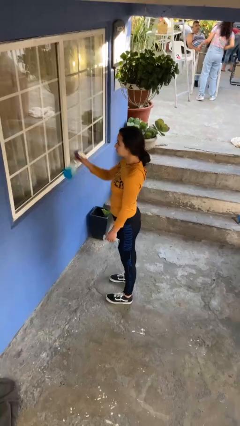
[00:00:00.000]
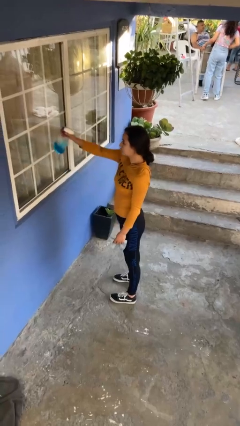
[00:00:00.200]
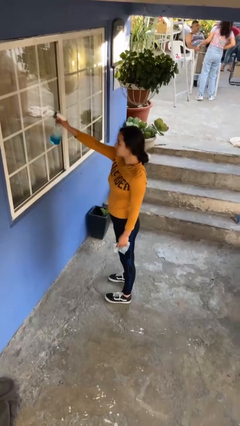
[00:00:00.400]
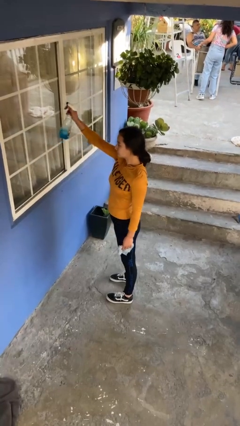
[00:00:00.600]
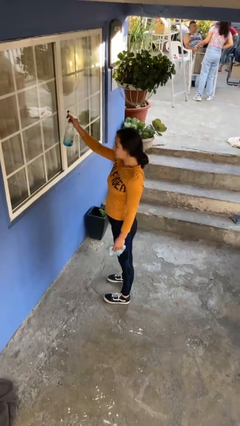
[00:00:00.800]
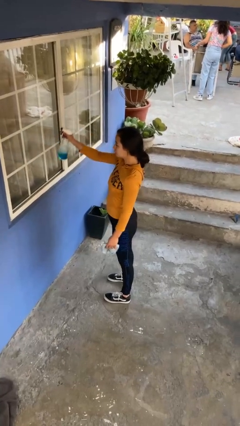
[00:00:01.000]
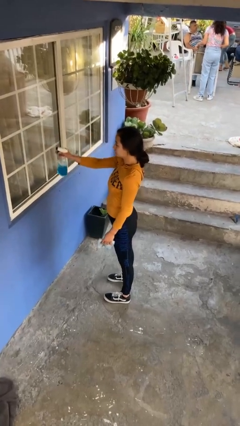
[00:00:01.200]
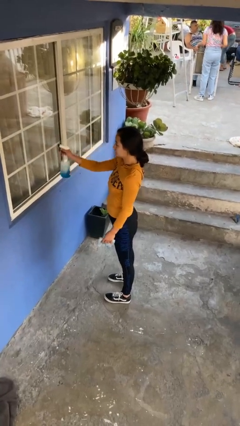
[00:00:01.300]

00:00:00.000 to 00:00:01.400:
person sprays from bottle

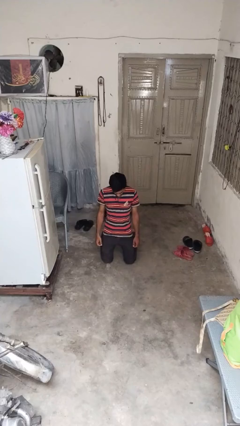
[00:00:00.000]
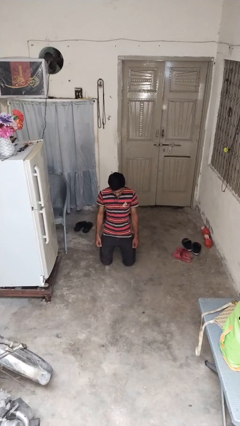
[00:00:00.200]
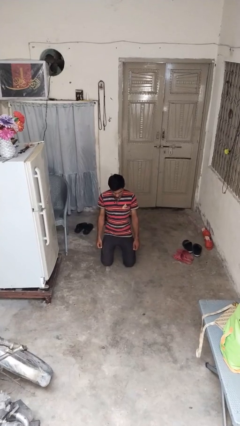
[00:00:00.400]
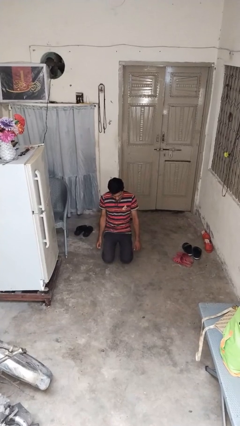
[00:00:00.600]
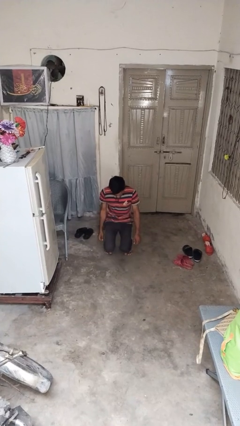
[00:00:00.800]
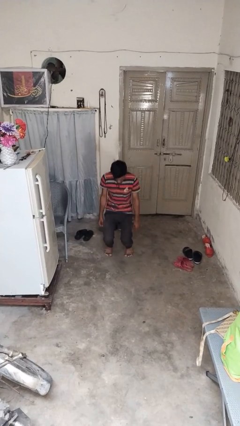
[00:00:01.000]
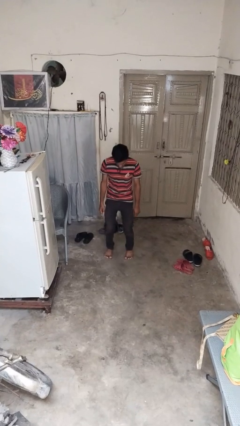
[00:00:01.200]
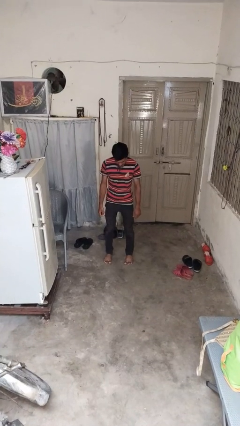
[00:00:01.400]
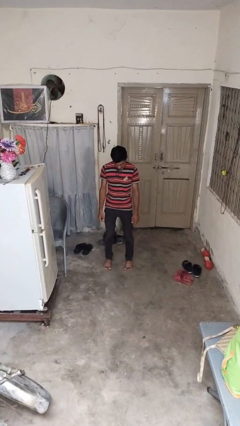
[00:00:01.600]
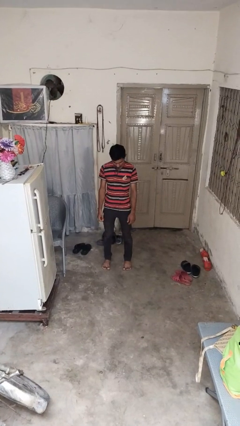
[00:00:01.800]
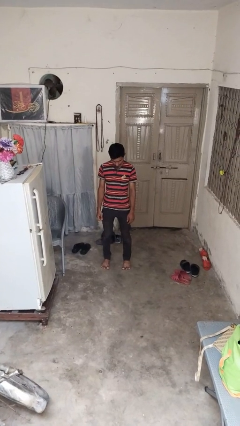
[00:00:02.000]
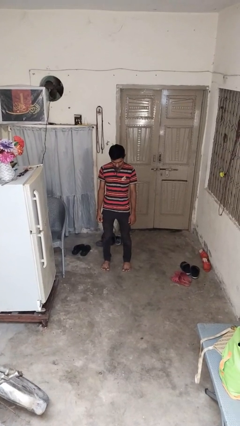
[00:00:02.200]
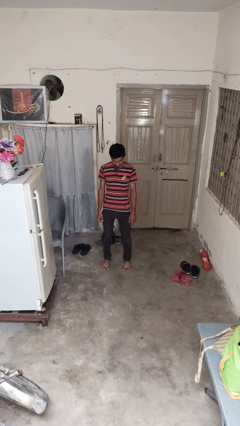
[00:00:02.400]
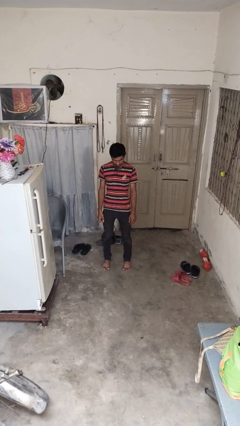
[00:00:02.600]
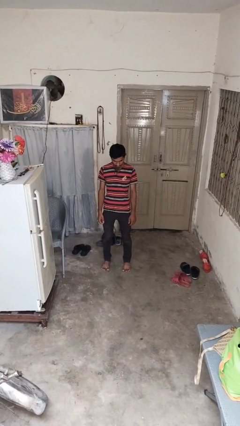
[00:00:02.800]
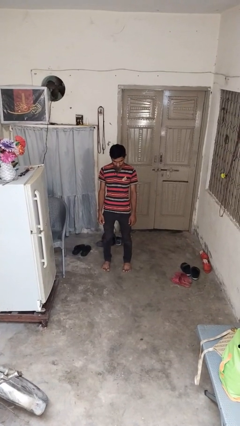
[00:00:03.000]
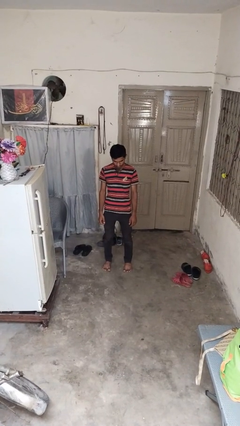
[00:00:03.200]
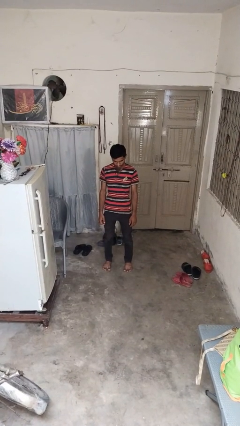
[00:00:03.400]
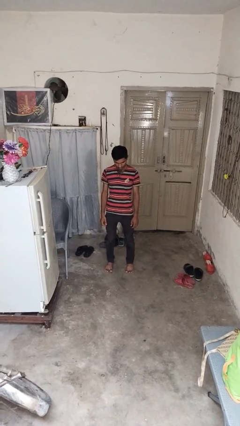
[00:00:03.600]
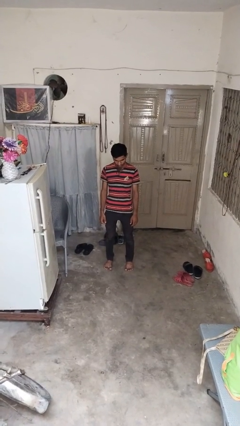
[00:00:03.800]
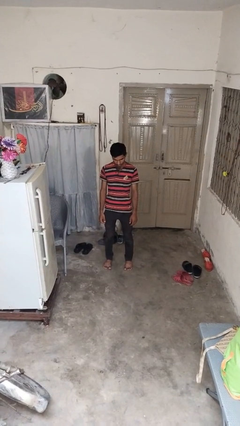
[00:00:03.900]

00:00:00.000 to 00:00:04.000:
person stands up from floor

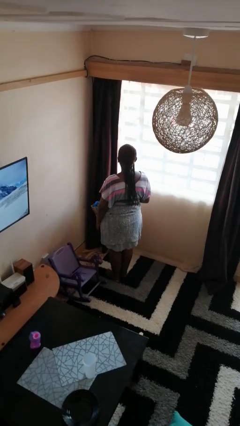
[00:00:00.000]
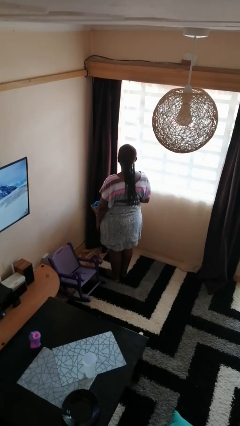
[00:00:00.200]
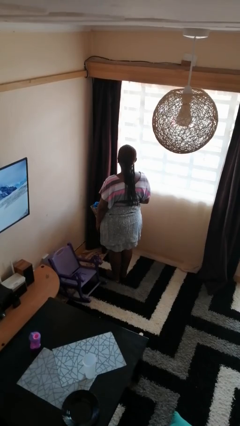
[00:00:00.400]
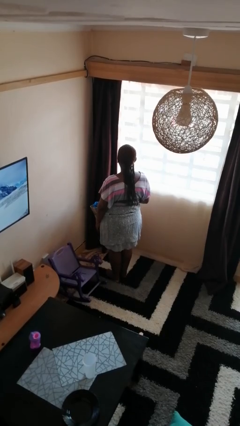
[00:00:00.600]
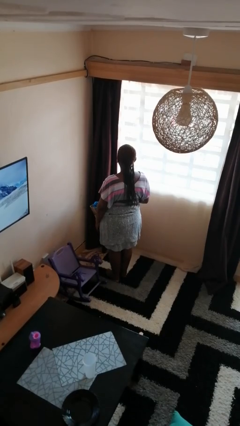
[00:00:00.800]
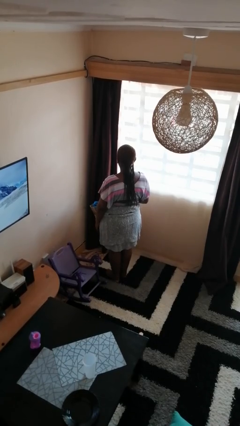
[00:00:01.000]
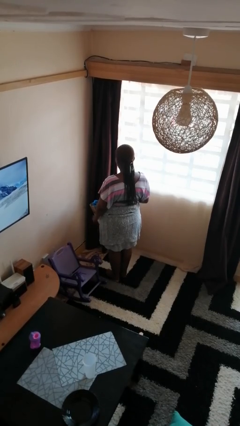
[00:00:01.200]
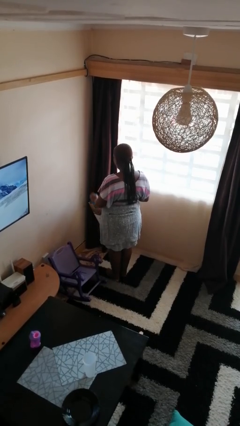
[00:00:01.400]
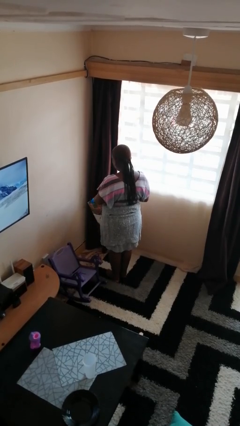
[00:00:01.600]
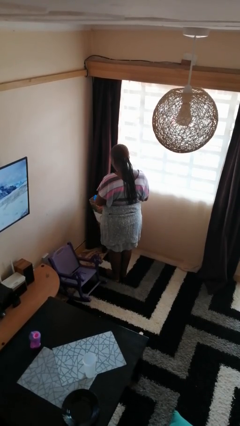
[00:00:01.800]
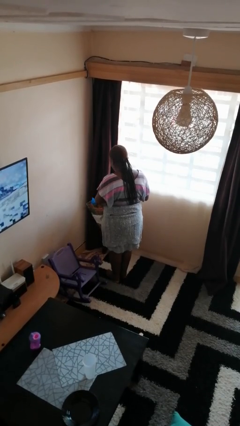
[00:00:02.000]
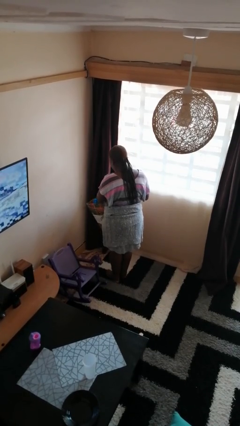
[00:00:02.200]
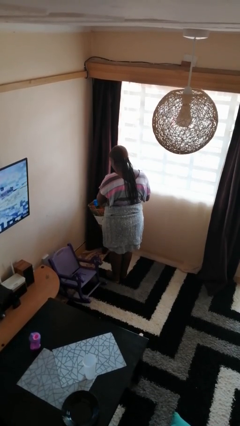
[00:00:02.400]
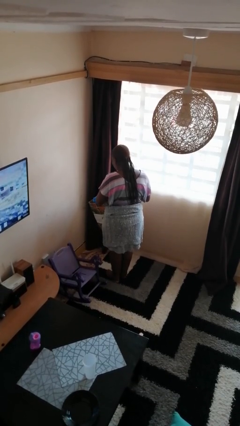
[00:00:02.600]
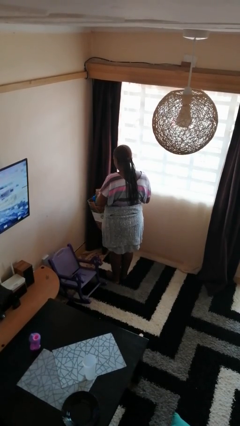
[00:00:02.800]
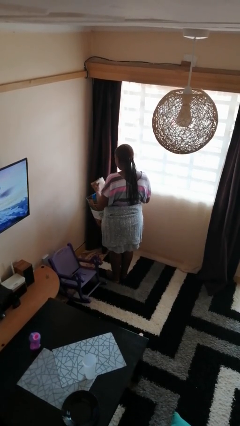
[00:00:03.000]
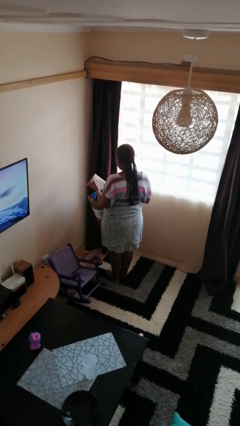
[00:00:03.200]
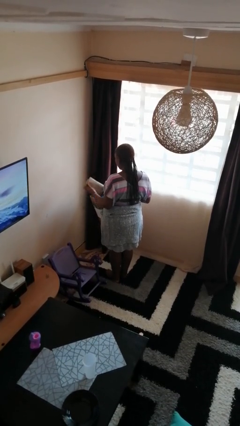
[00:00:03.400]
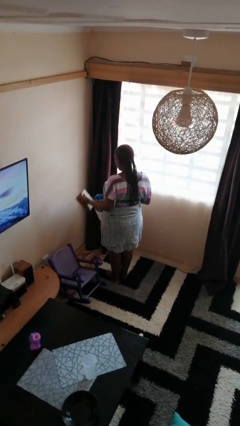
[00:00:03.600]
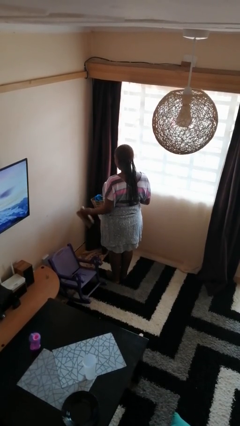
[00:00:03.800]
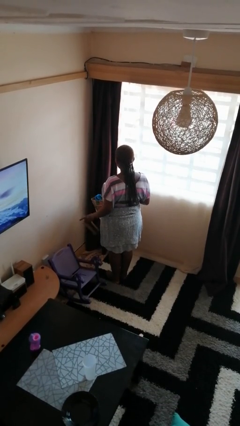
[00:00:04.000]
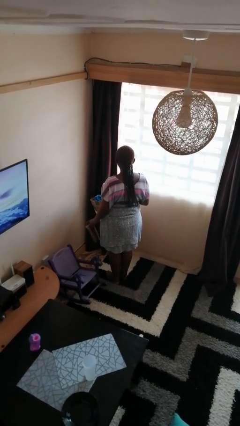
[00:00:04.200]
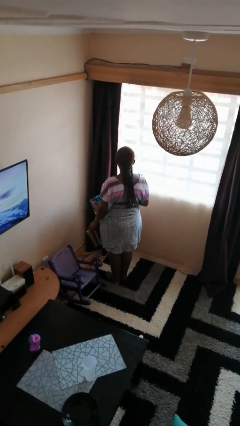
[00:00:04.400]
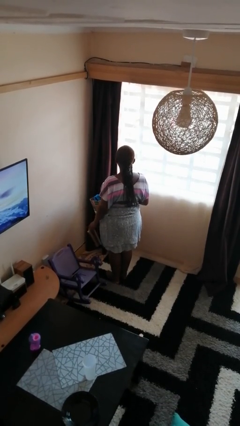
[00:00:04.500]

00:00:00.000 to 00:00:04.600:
person takes object from bag

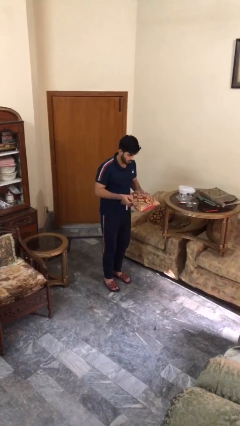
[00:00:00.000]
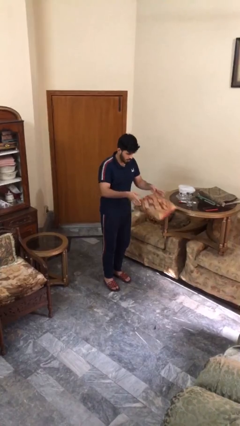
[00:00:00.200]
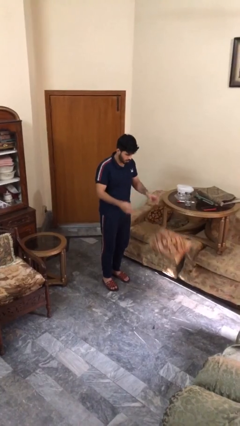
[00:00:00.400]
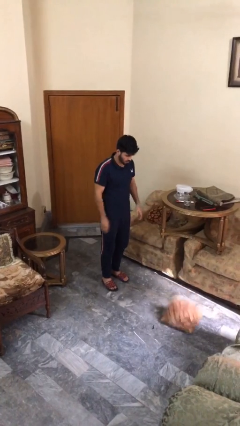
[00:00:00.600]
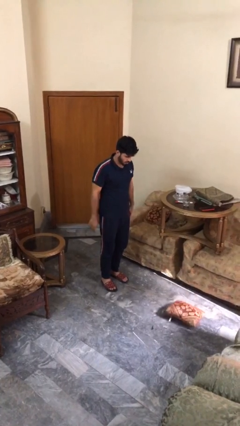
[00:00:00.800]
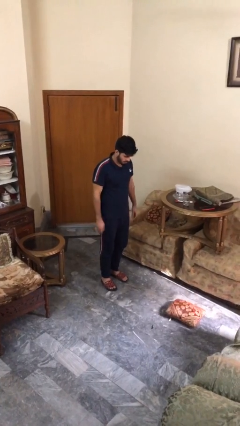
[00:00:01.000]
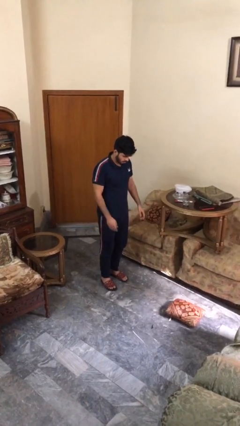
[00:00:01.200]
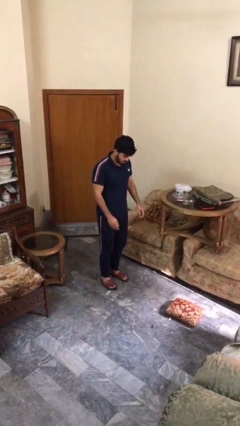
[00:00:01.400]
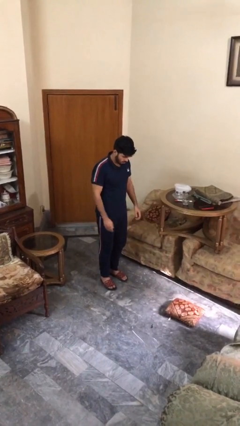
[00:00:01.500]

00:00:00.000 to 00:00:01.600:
person throws object to ground

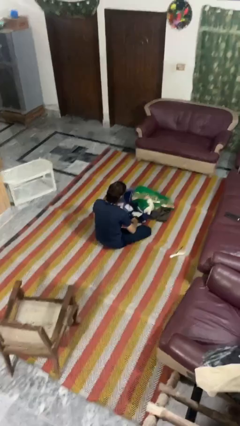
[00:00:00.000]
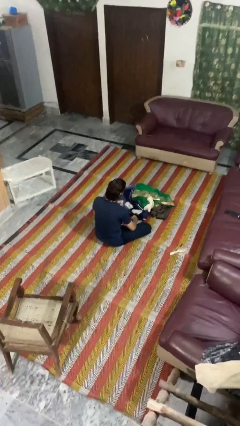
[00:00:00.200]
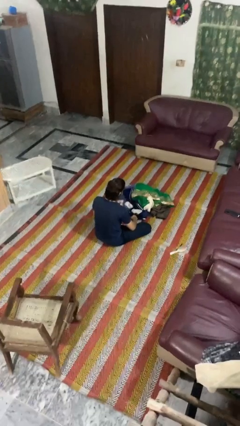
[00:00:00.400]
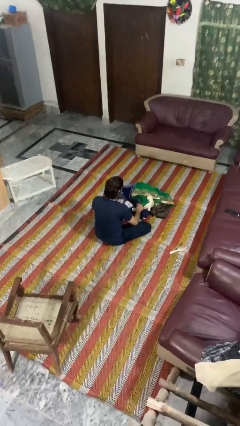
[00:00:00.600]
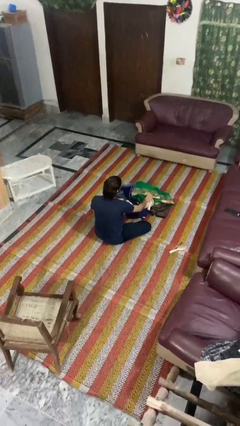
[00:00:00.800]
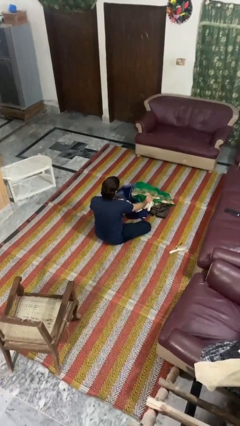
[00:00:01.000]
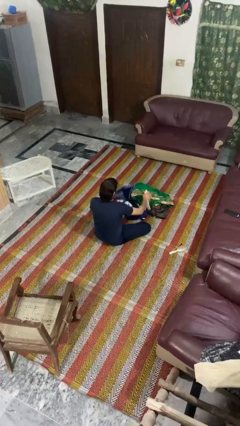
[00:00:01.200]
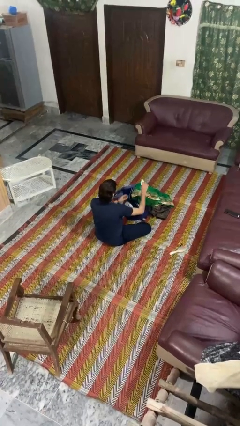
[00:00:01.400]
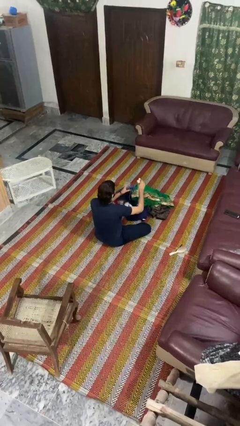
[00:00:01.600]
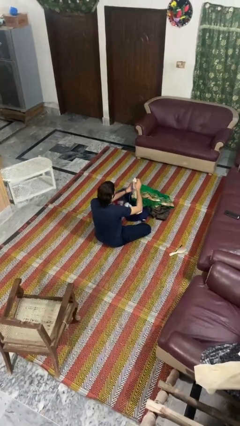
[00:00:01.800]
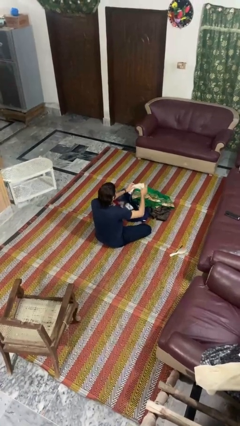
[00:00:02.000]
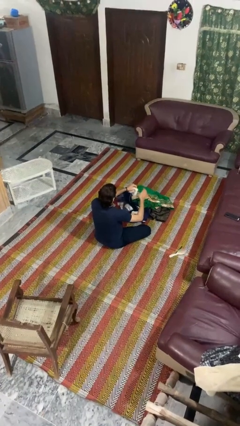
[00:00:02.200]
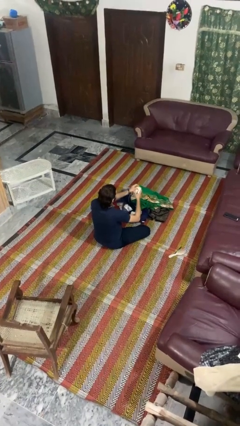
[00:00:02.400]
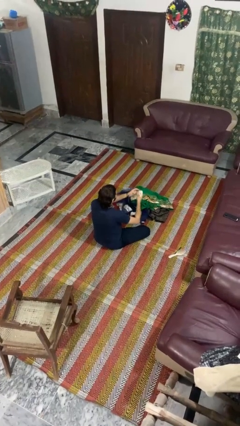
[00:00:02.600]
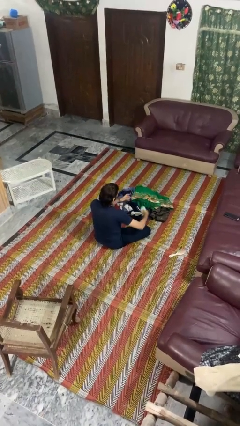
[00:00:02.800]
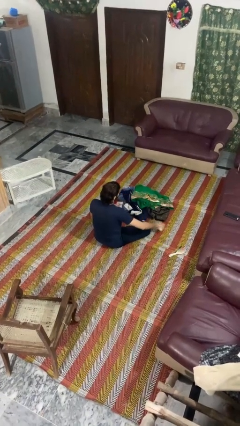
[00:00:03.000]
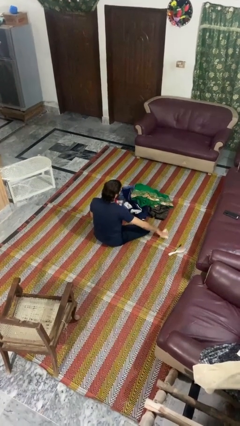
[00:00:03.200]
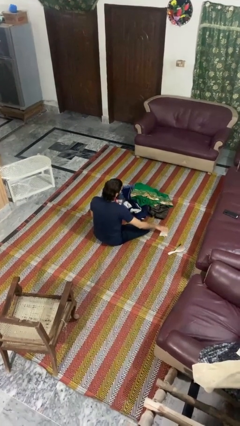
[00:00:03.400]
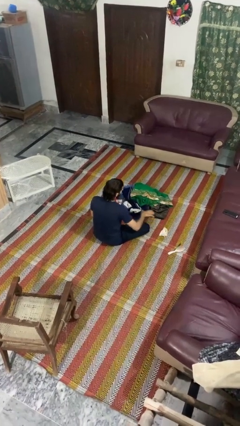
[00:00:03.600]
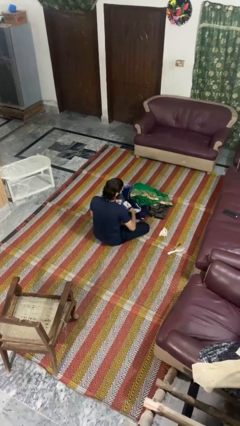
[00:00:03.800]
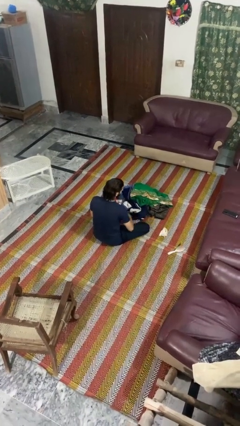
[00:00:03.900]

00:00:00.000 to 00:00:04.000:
person folds socks

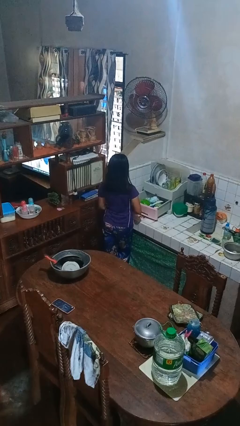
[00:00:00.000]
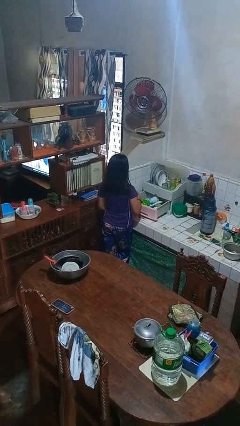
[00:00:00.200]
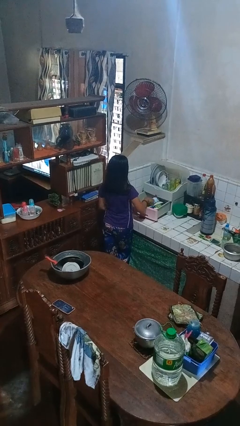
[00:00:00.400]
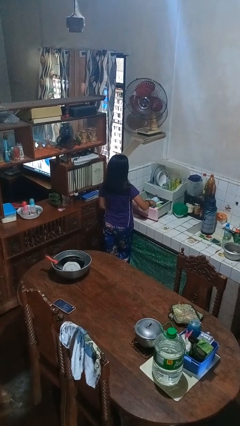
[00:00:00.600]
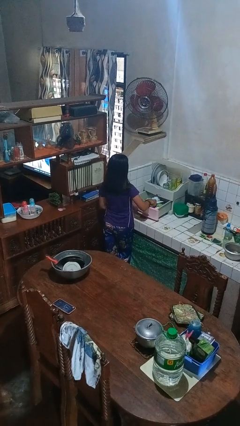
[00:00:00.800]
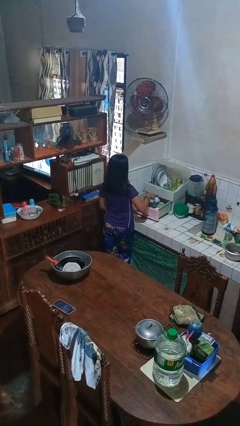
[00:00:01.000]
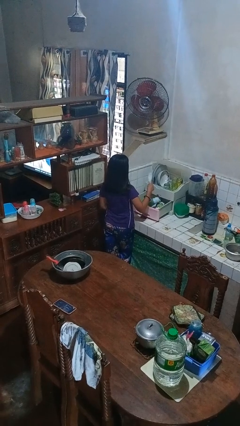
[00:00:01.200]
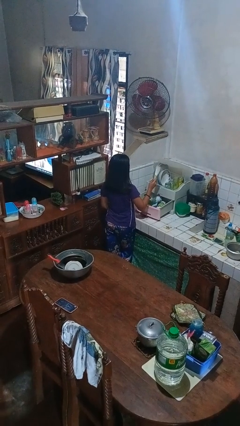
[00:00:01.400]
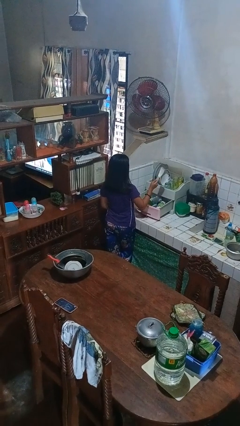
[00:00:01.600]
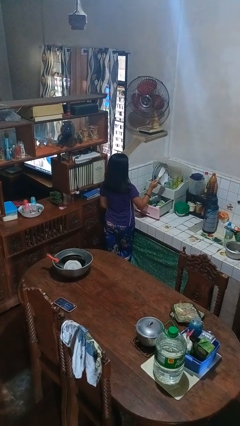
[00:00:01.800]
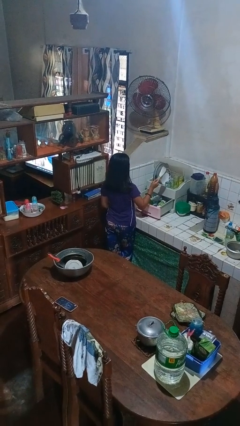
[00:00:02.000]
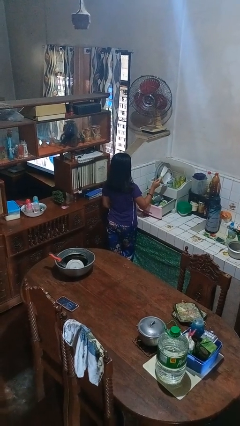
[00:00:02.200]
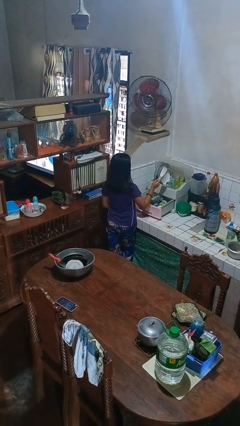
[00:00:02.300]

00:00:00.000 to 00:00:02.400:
person takes object from kitchen drawer
